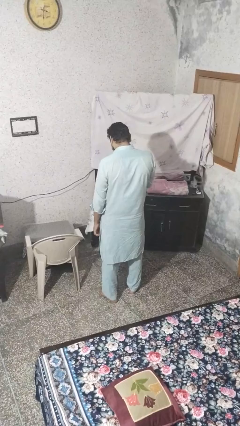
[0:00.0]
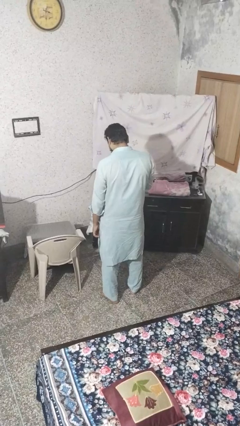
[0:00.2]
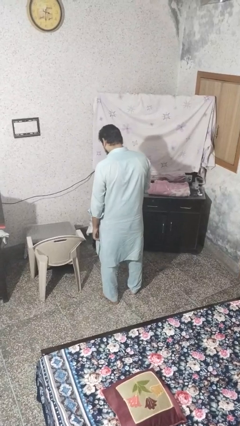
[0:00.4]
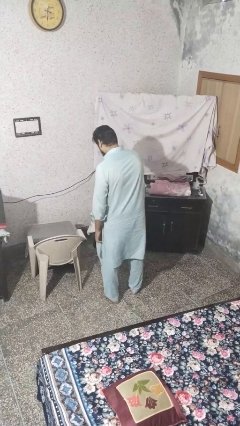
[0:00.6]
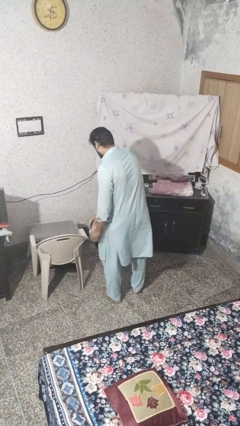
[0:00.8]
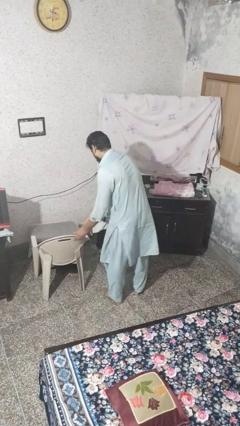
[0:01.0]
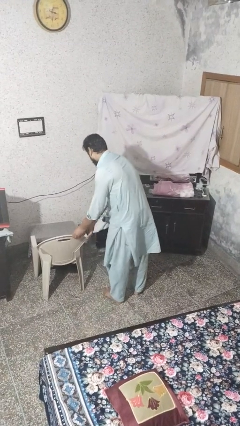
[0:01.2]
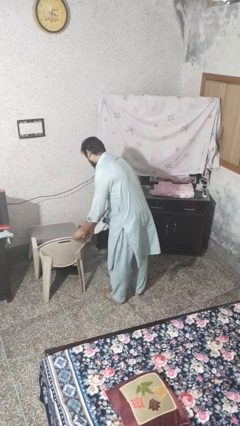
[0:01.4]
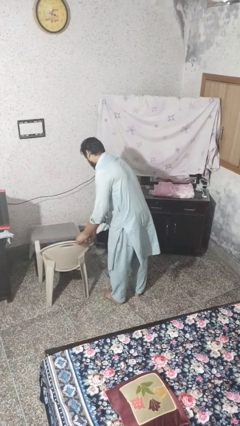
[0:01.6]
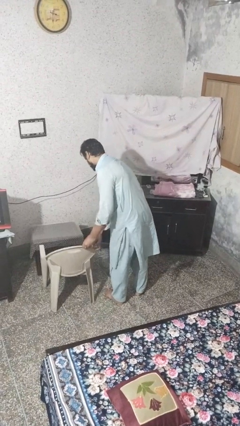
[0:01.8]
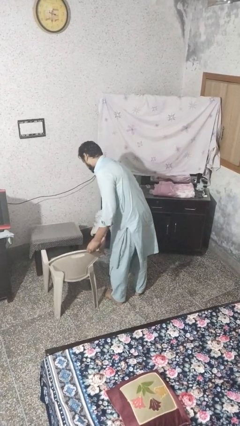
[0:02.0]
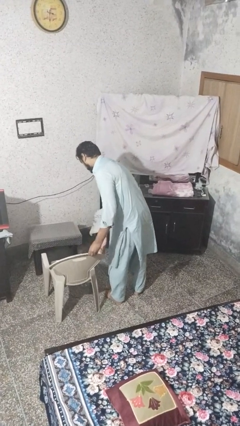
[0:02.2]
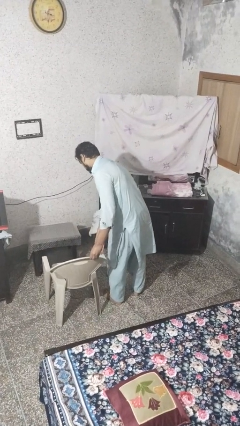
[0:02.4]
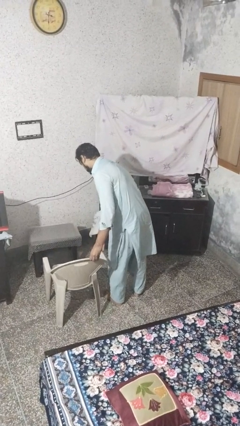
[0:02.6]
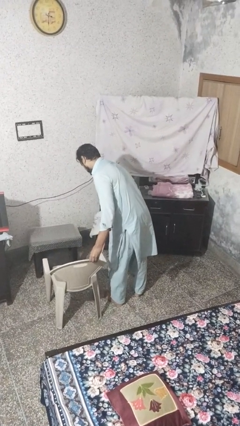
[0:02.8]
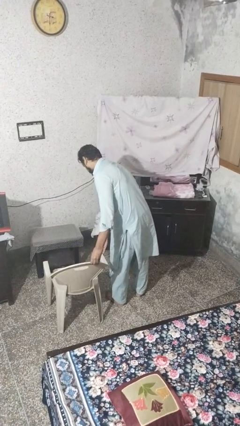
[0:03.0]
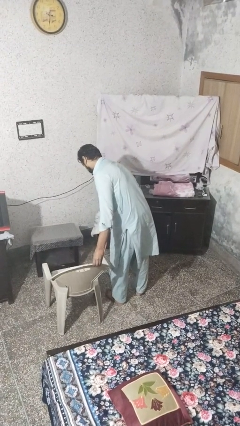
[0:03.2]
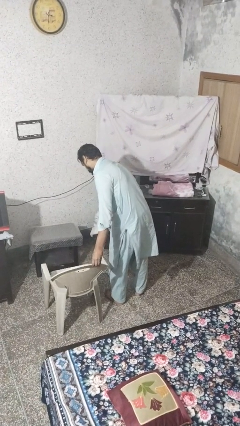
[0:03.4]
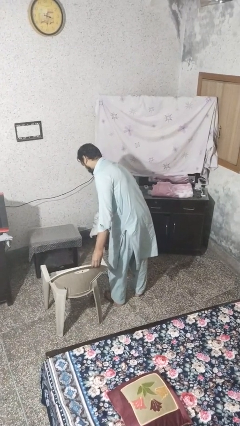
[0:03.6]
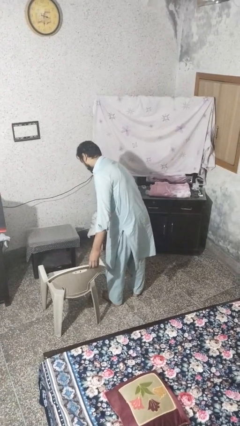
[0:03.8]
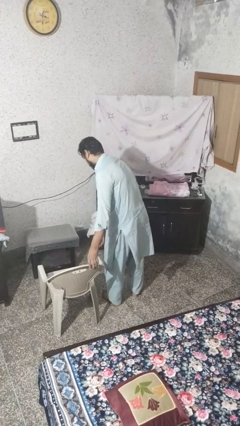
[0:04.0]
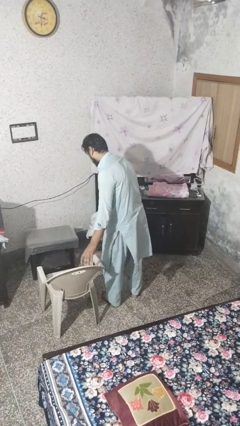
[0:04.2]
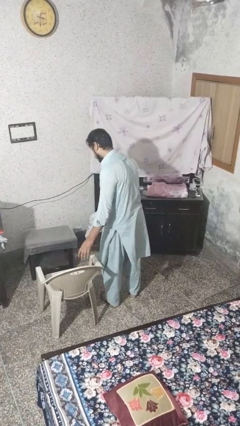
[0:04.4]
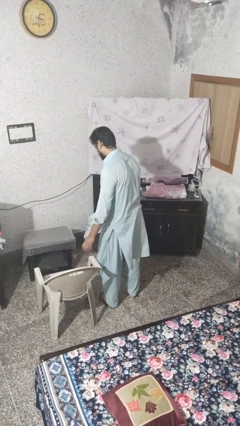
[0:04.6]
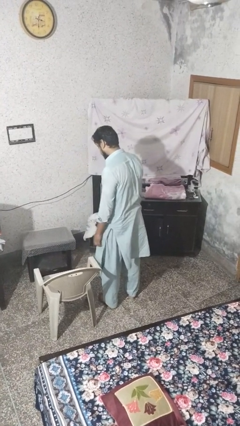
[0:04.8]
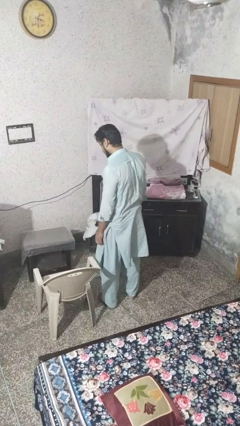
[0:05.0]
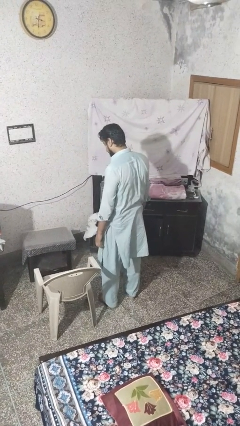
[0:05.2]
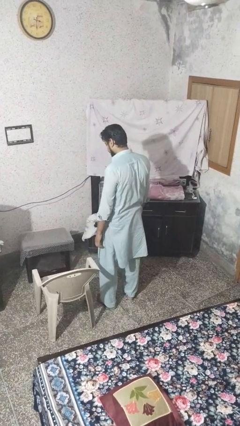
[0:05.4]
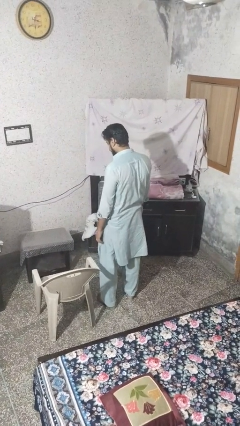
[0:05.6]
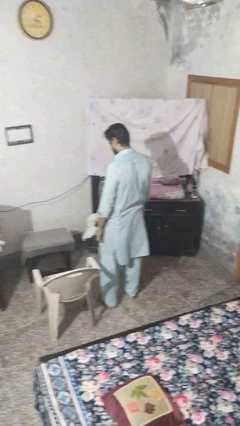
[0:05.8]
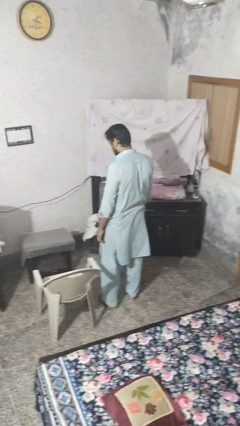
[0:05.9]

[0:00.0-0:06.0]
person pulls out chair

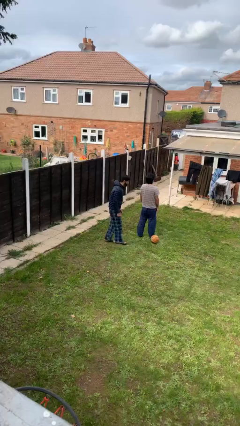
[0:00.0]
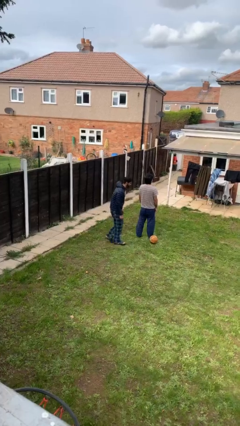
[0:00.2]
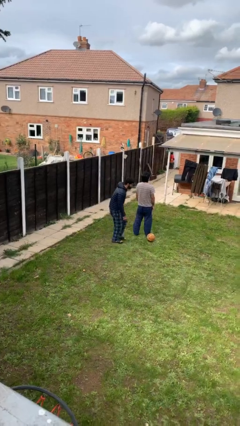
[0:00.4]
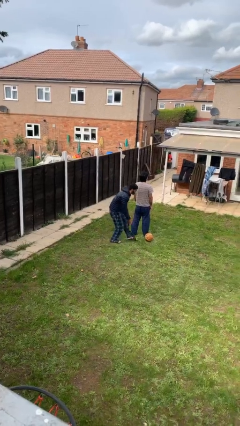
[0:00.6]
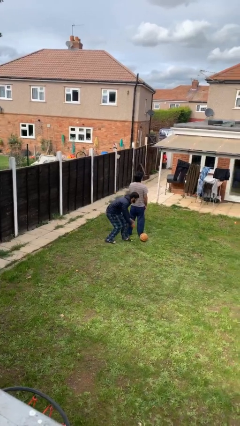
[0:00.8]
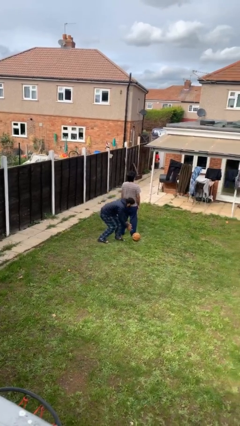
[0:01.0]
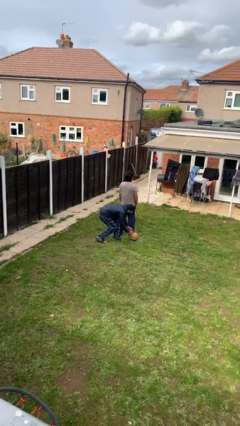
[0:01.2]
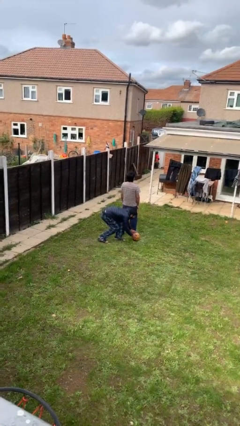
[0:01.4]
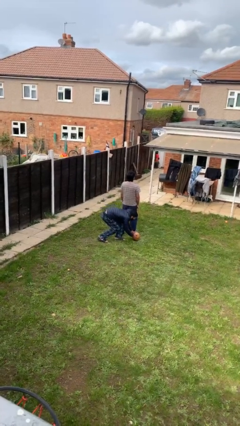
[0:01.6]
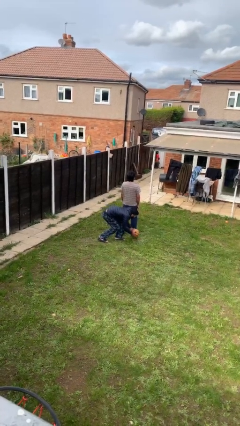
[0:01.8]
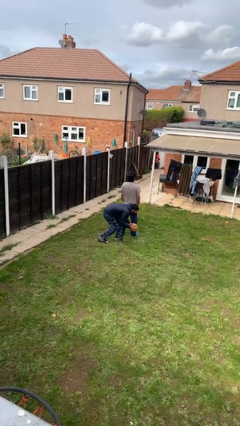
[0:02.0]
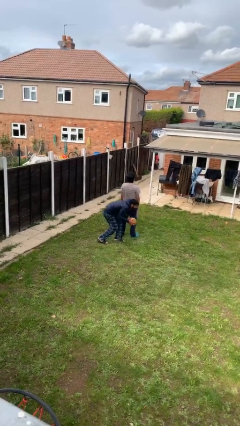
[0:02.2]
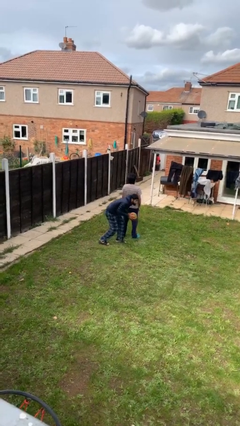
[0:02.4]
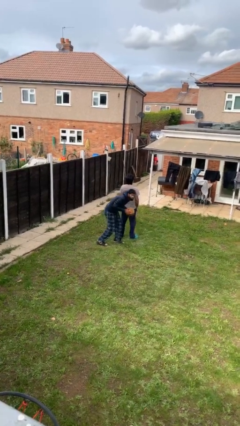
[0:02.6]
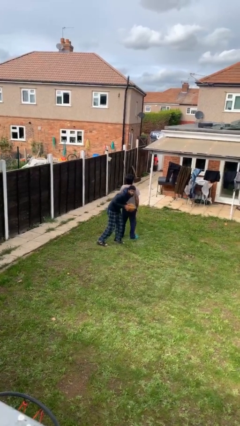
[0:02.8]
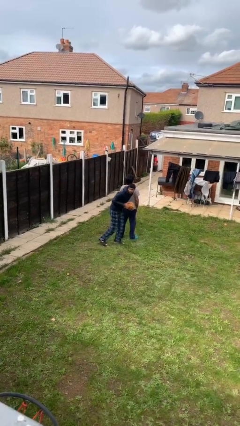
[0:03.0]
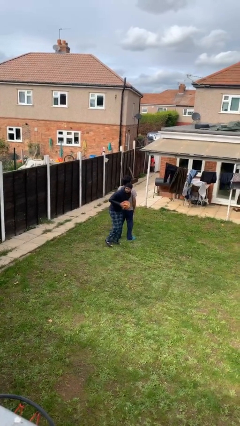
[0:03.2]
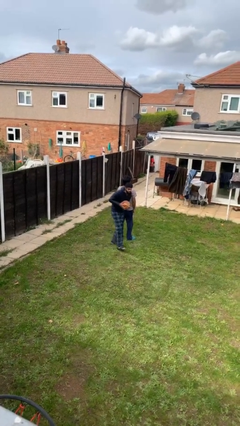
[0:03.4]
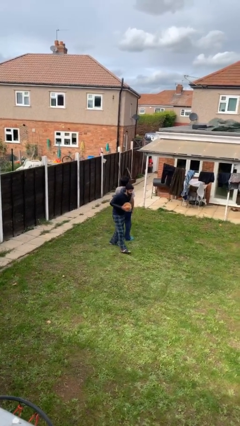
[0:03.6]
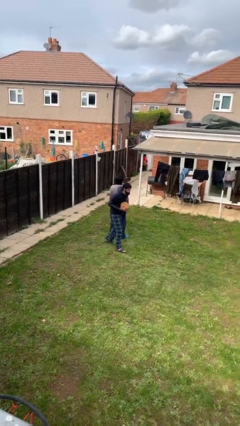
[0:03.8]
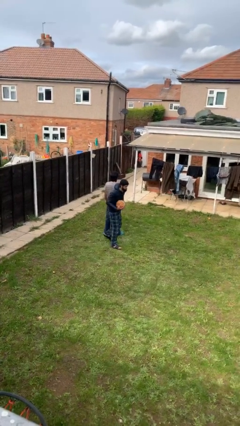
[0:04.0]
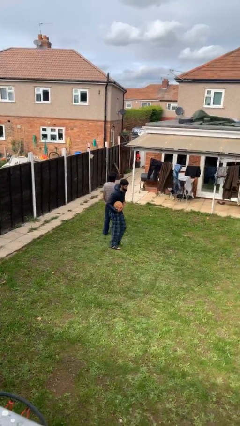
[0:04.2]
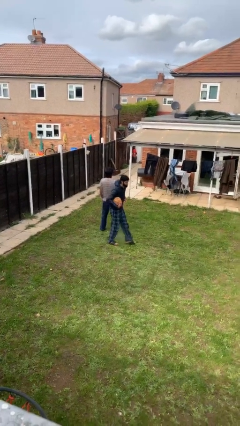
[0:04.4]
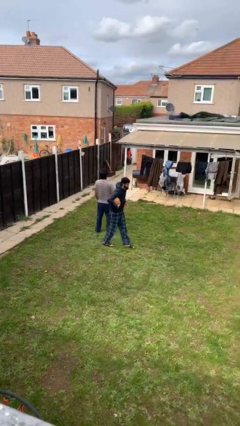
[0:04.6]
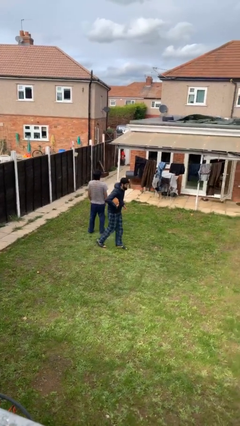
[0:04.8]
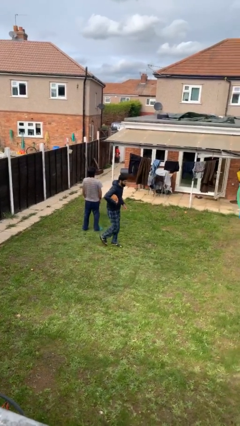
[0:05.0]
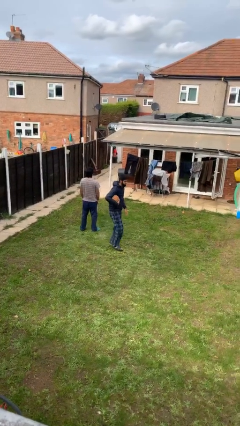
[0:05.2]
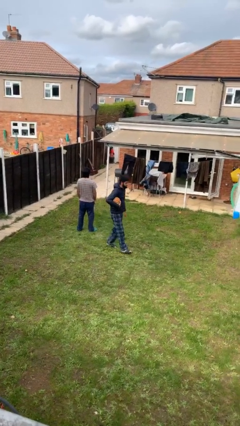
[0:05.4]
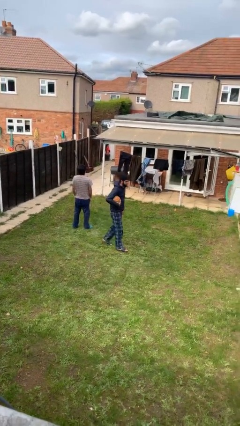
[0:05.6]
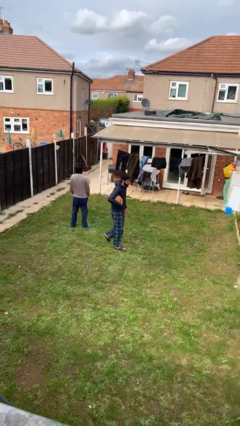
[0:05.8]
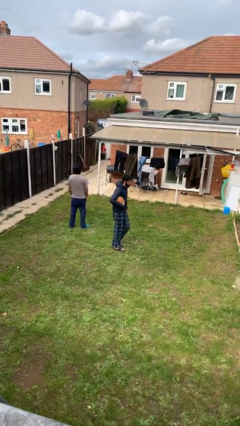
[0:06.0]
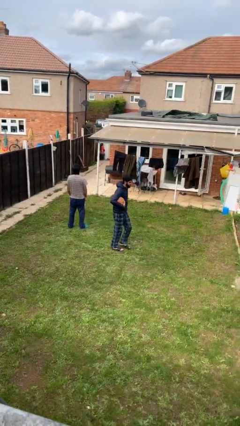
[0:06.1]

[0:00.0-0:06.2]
person steals object from person

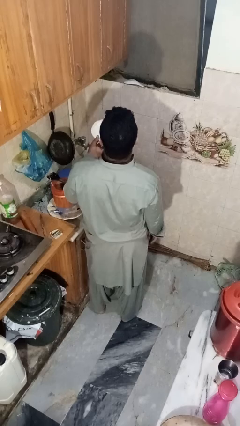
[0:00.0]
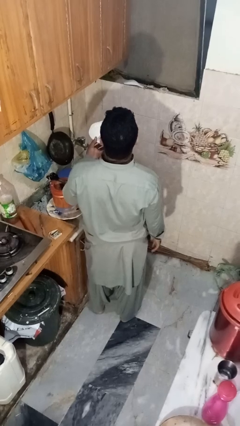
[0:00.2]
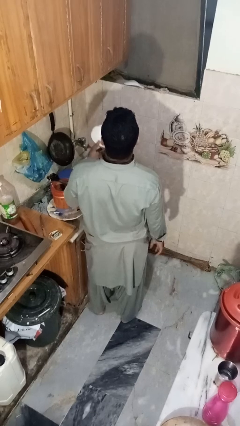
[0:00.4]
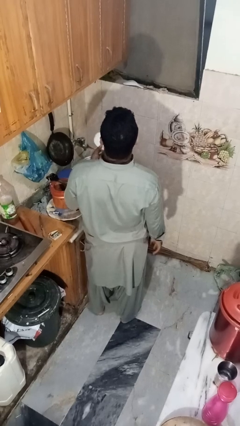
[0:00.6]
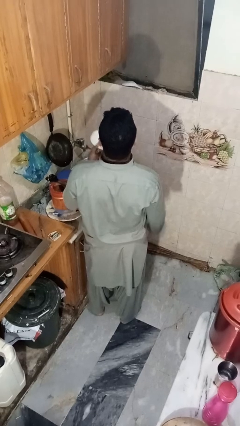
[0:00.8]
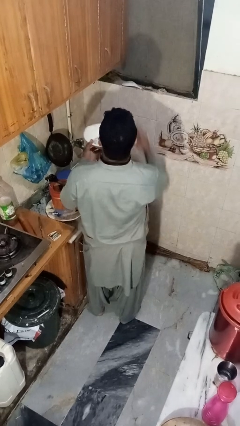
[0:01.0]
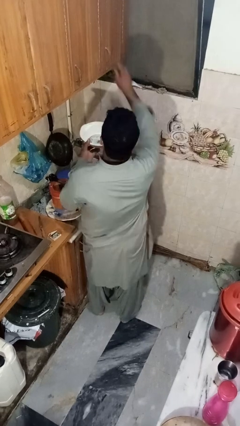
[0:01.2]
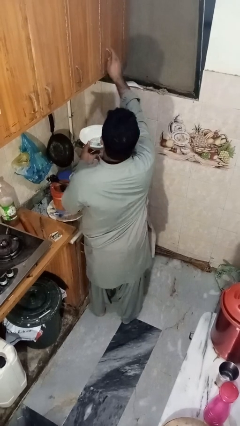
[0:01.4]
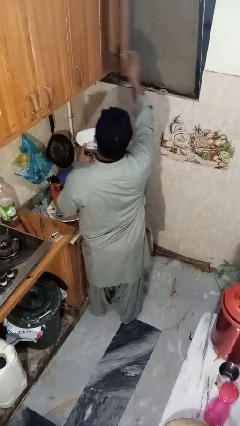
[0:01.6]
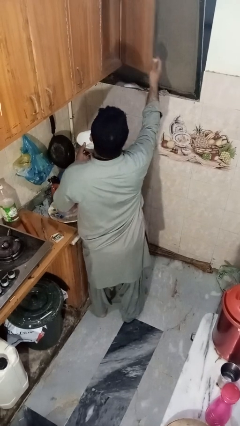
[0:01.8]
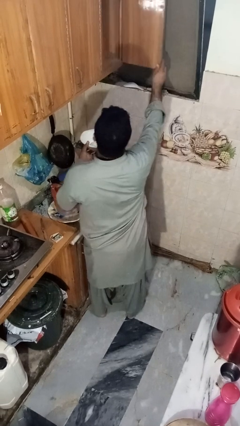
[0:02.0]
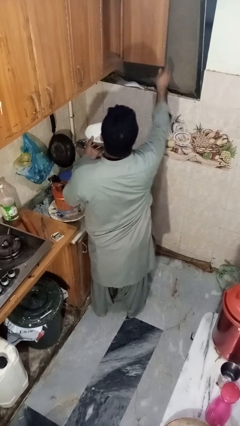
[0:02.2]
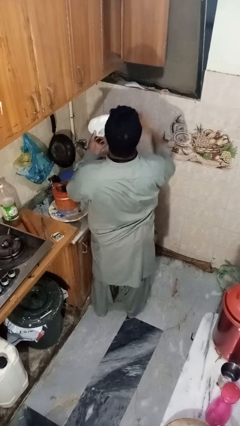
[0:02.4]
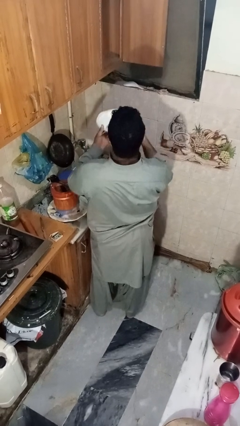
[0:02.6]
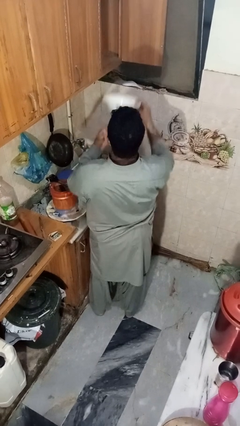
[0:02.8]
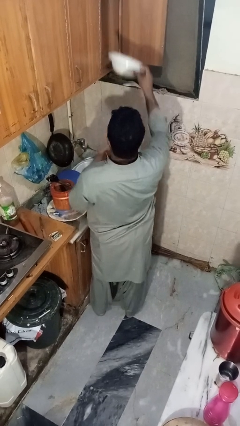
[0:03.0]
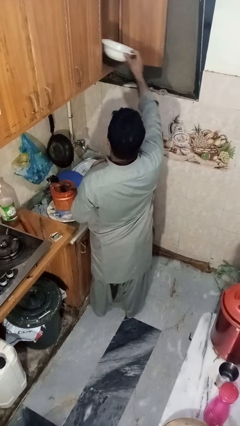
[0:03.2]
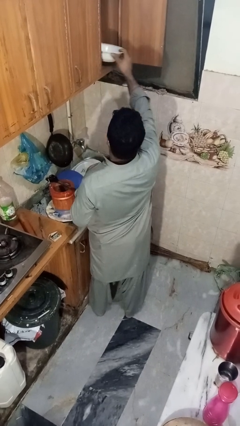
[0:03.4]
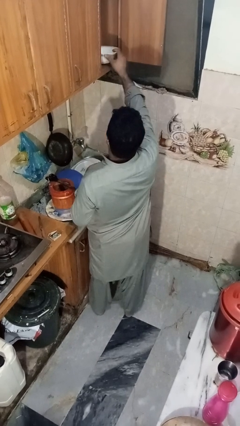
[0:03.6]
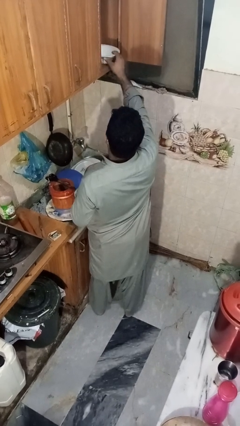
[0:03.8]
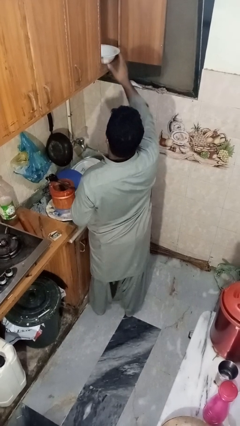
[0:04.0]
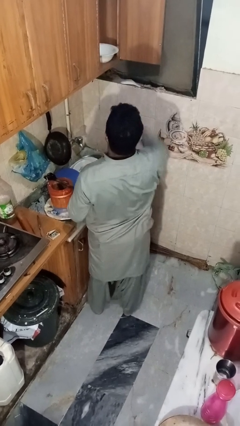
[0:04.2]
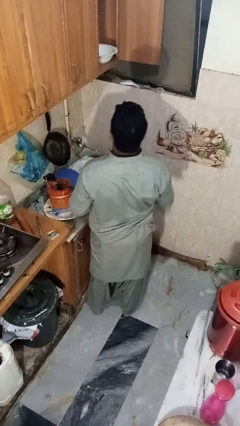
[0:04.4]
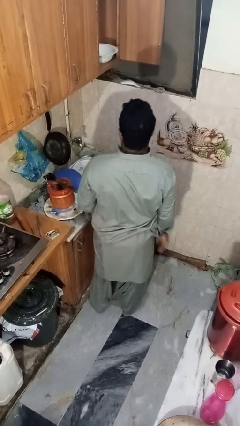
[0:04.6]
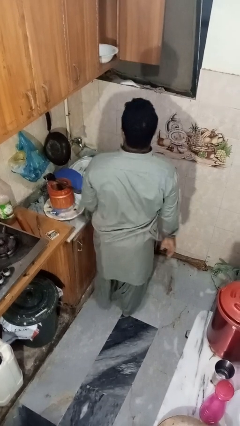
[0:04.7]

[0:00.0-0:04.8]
person puts object in cabinet

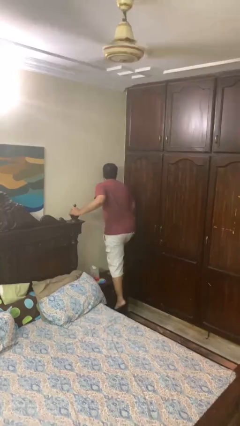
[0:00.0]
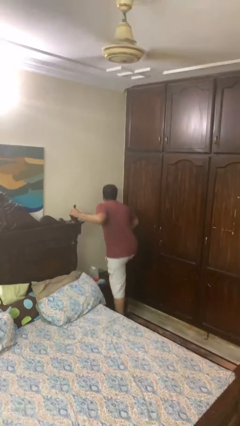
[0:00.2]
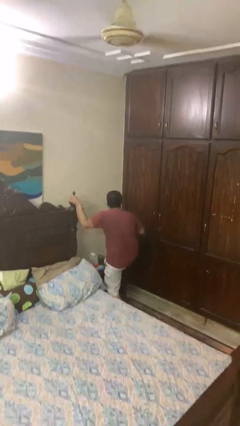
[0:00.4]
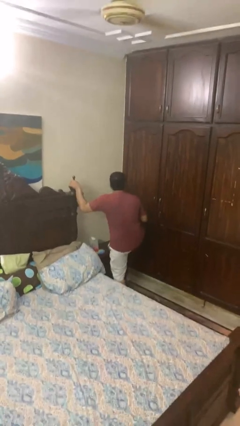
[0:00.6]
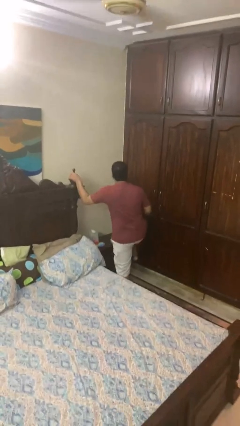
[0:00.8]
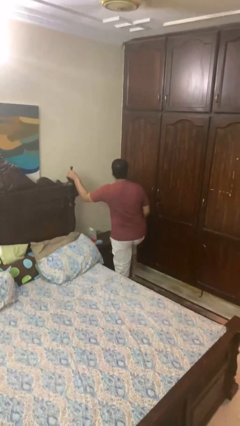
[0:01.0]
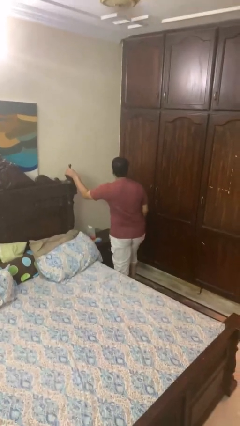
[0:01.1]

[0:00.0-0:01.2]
person climbs off table
